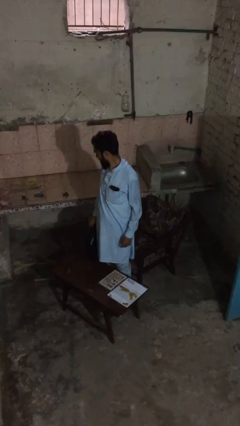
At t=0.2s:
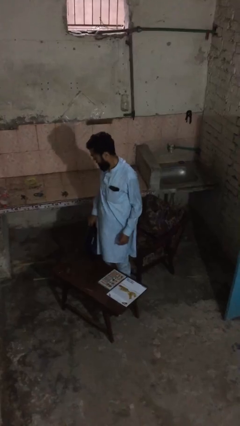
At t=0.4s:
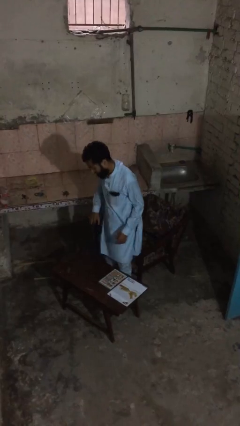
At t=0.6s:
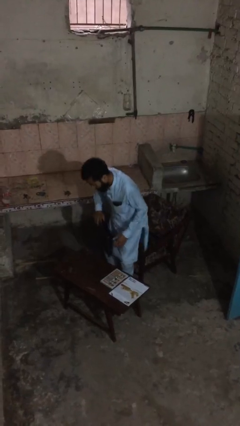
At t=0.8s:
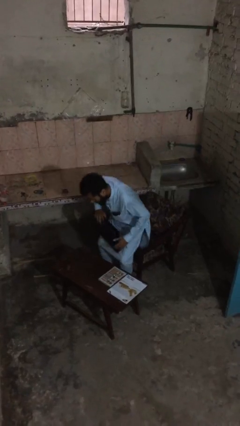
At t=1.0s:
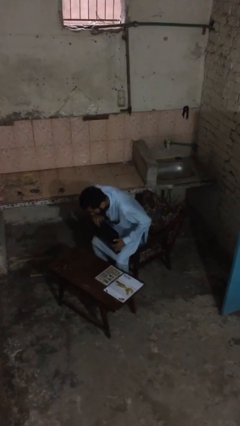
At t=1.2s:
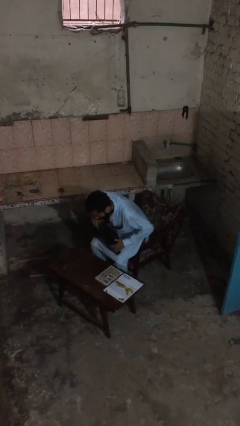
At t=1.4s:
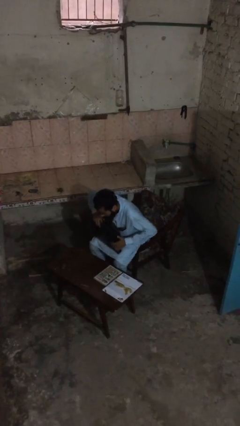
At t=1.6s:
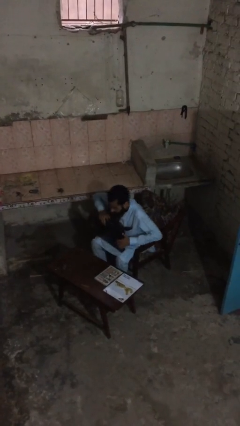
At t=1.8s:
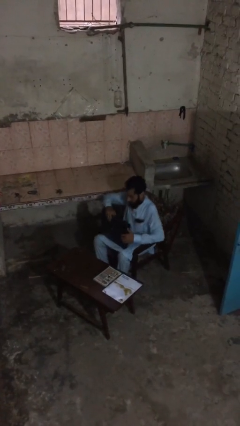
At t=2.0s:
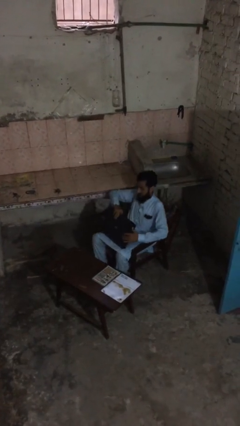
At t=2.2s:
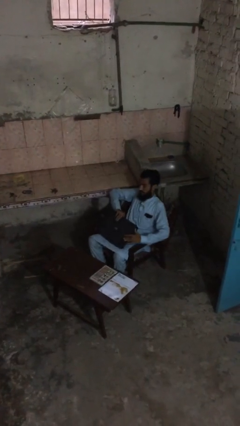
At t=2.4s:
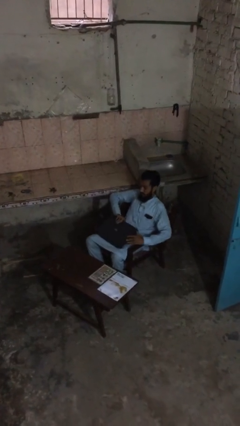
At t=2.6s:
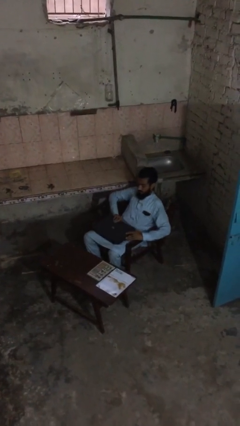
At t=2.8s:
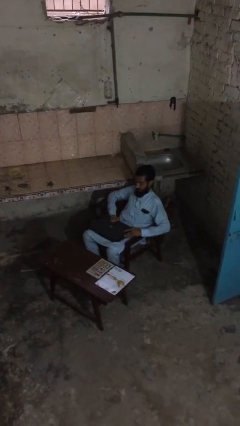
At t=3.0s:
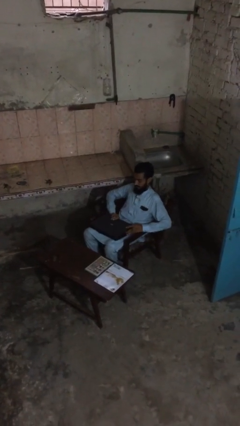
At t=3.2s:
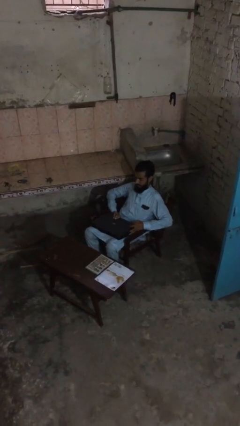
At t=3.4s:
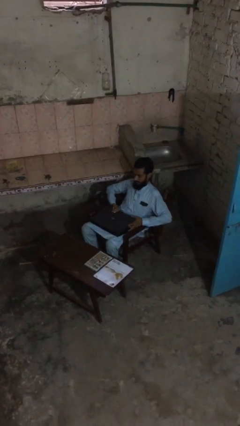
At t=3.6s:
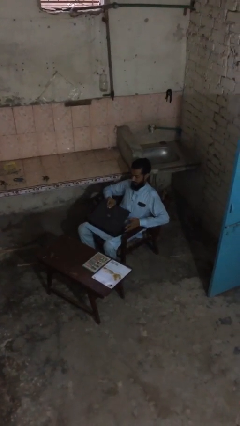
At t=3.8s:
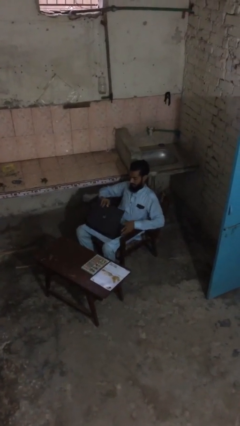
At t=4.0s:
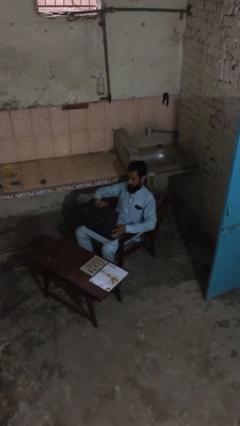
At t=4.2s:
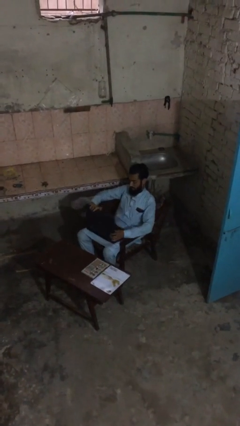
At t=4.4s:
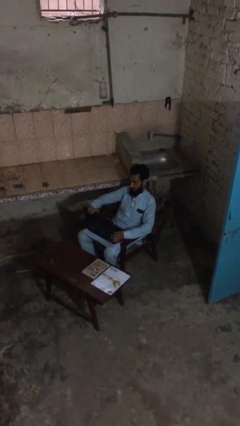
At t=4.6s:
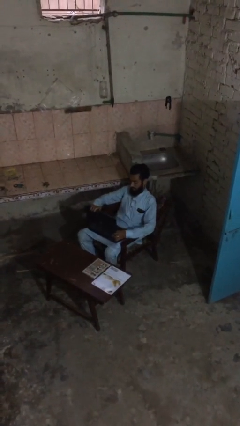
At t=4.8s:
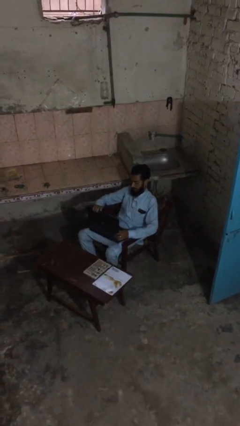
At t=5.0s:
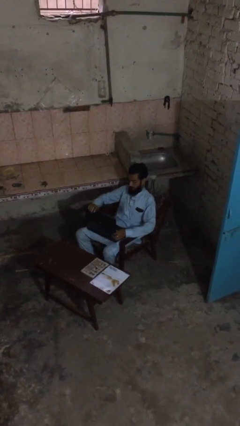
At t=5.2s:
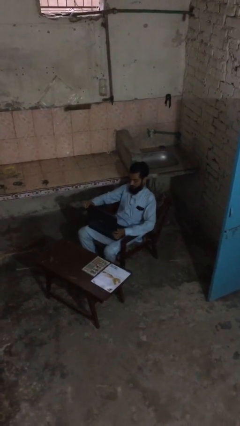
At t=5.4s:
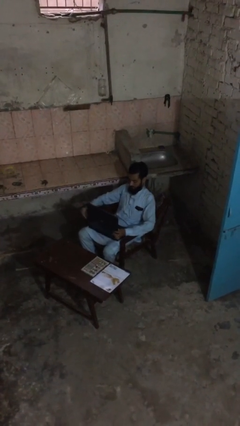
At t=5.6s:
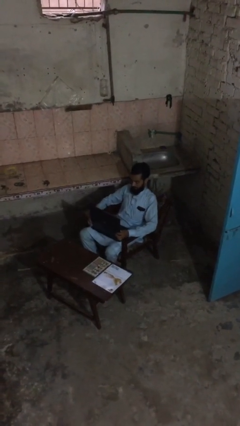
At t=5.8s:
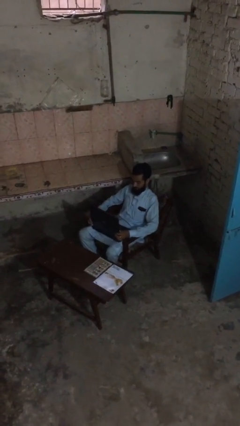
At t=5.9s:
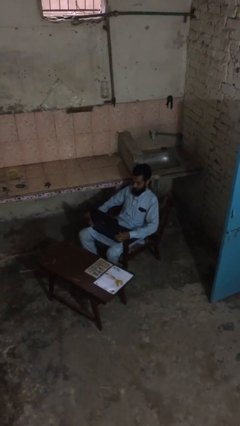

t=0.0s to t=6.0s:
person sits down

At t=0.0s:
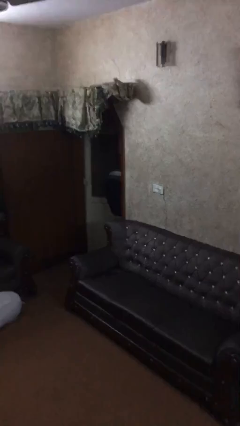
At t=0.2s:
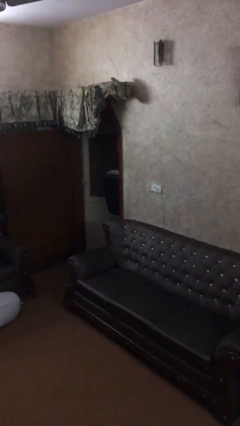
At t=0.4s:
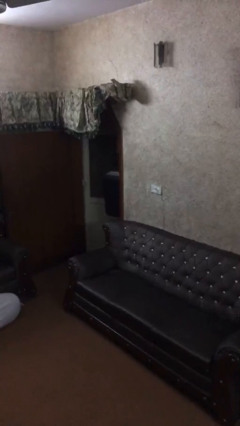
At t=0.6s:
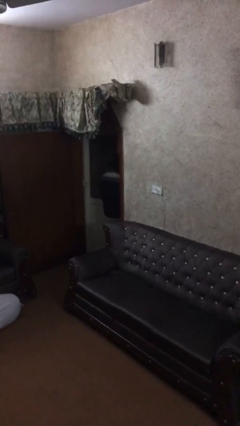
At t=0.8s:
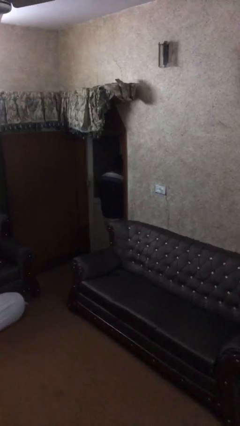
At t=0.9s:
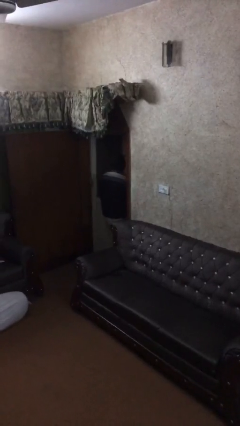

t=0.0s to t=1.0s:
person opens facility door

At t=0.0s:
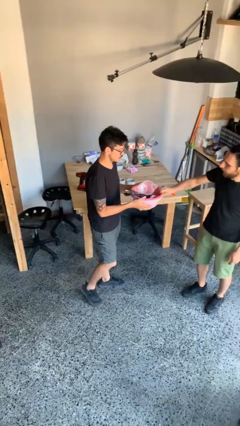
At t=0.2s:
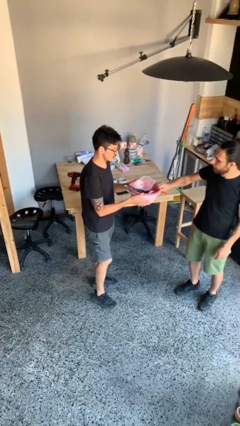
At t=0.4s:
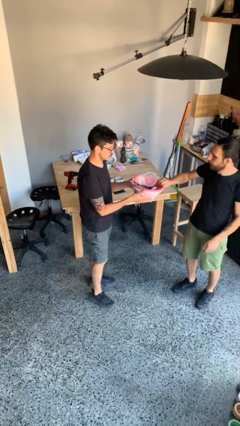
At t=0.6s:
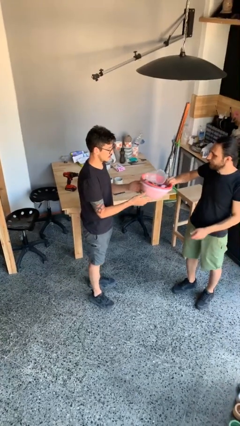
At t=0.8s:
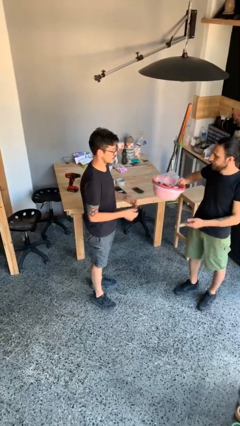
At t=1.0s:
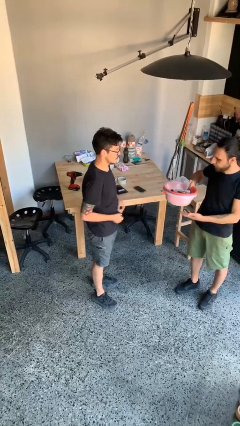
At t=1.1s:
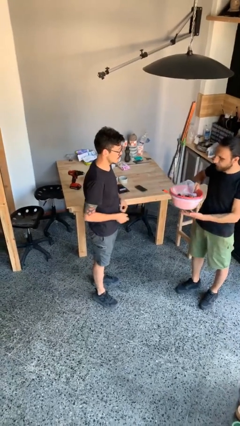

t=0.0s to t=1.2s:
person transfers object to person

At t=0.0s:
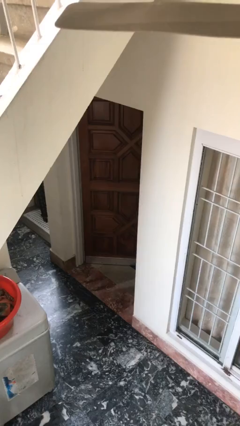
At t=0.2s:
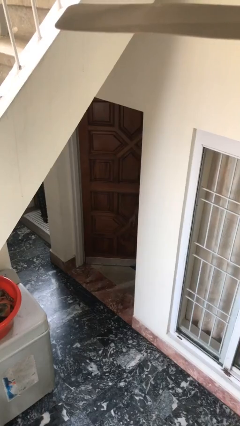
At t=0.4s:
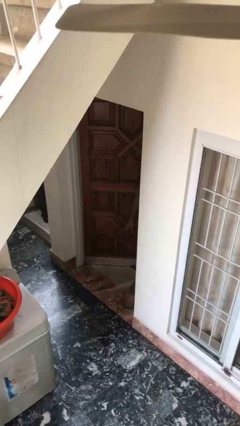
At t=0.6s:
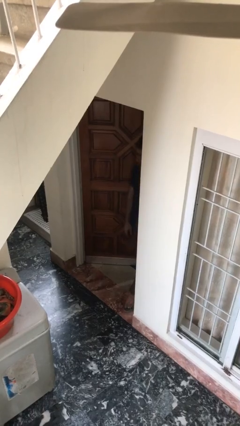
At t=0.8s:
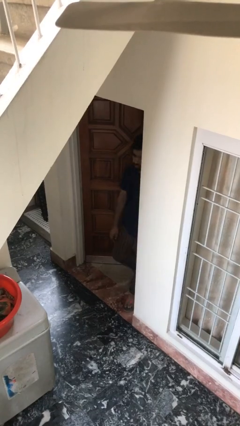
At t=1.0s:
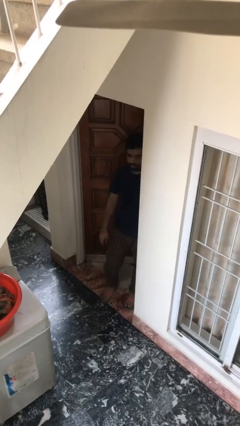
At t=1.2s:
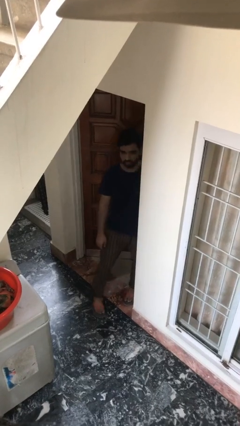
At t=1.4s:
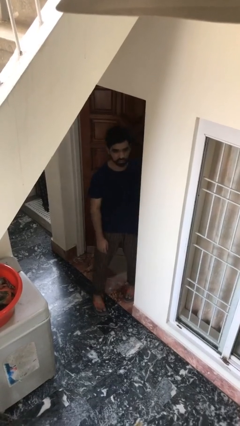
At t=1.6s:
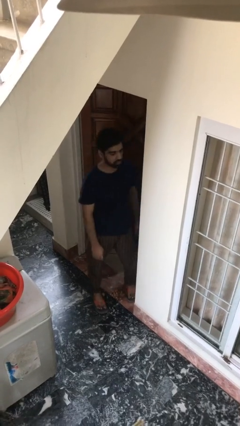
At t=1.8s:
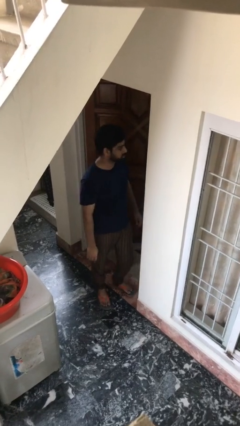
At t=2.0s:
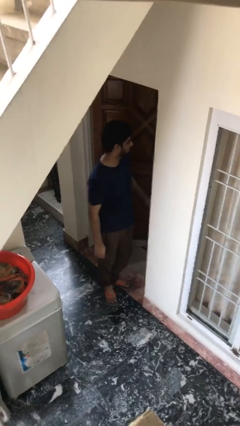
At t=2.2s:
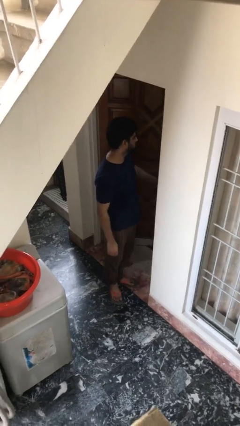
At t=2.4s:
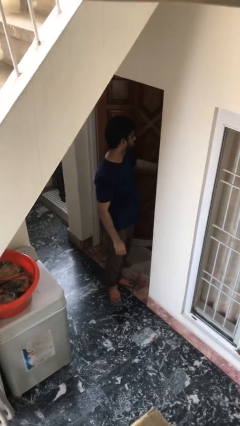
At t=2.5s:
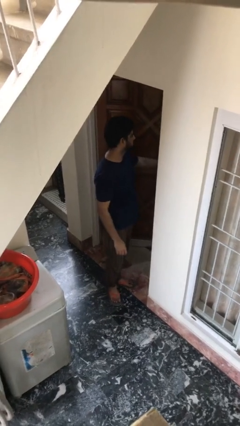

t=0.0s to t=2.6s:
person enters scene through structure

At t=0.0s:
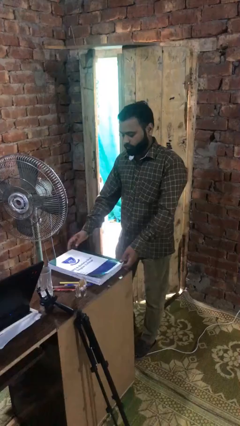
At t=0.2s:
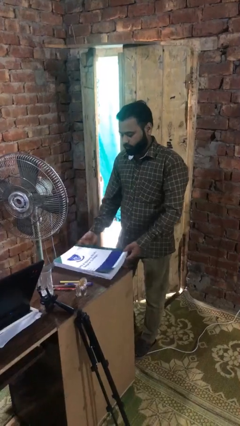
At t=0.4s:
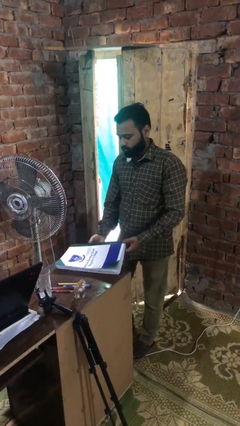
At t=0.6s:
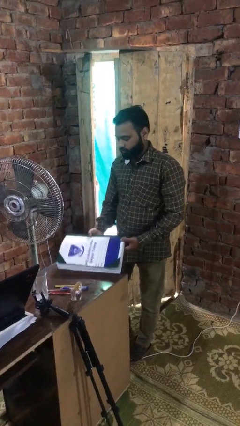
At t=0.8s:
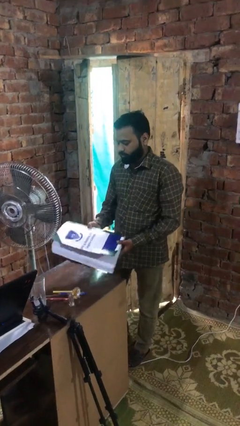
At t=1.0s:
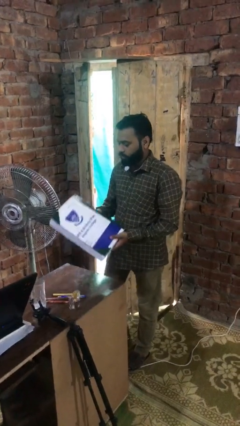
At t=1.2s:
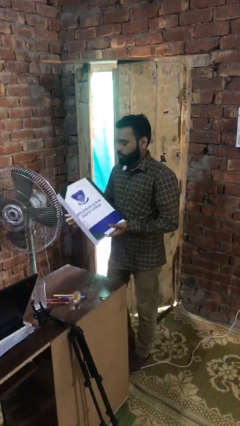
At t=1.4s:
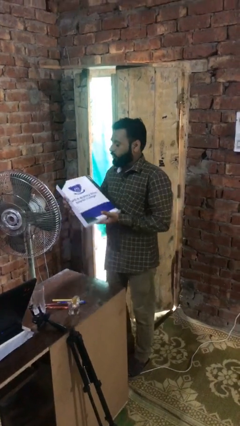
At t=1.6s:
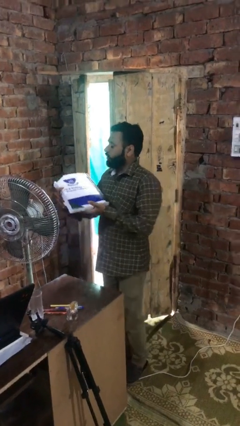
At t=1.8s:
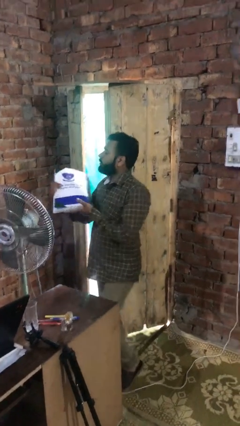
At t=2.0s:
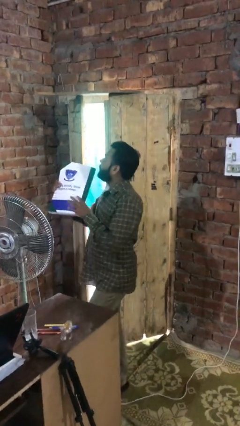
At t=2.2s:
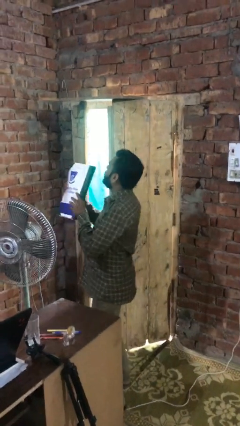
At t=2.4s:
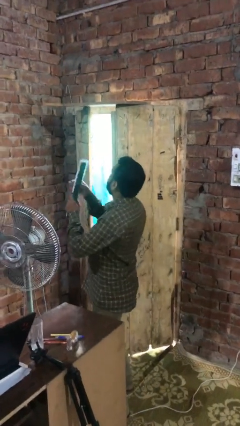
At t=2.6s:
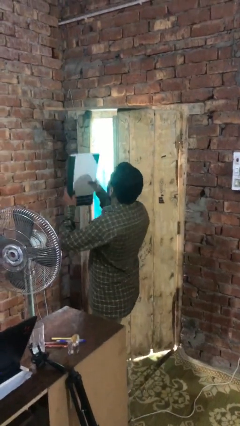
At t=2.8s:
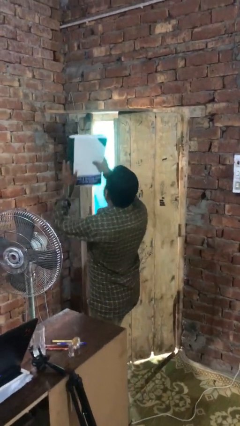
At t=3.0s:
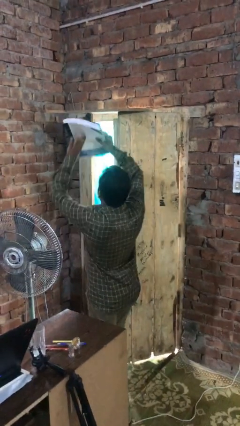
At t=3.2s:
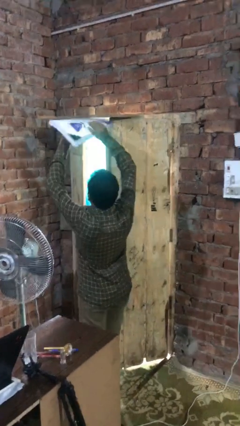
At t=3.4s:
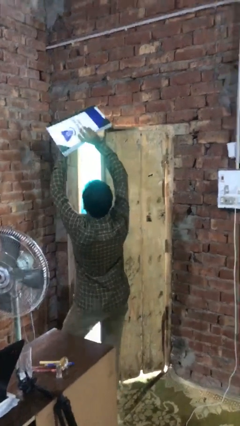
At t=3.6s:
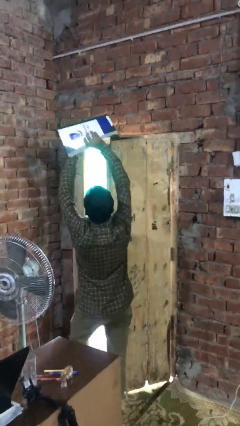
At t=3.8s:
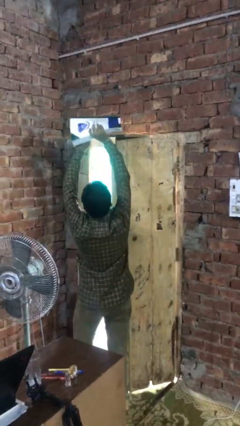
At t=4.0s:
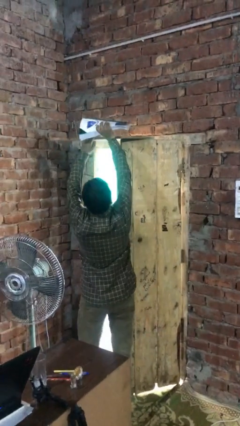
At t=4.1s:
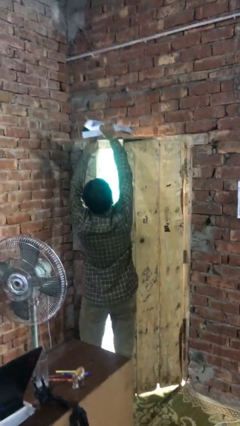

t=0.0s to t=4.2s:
person picks up object from table

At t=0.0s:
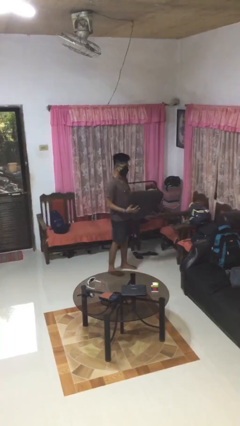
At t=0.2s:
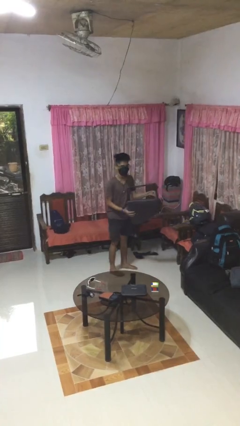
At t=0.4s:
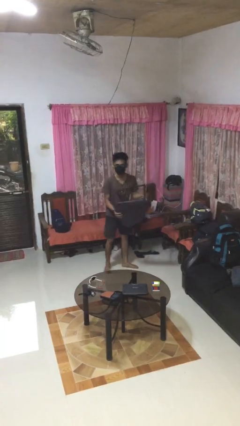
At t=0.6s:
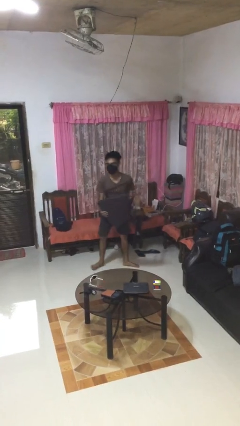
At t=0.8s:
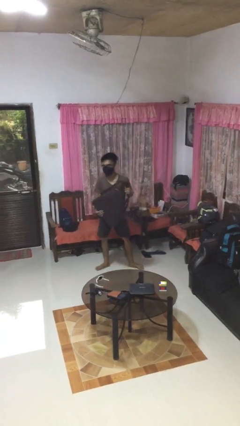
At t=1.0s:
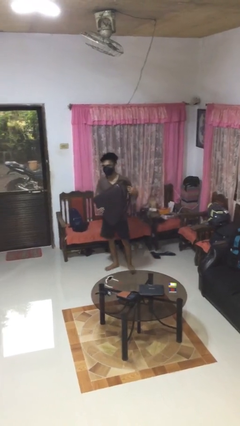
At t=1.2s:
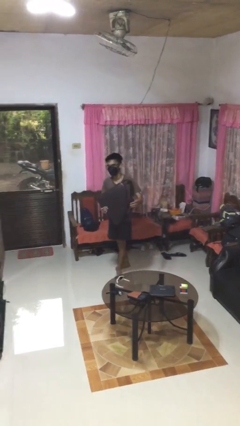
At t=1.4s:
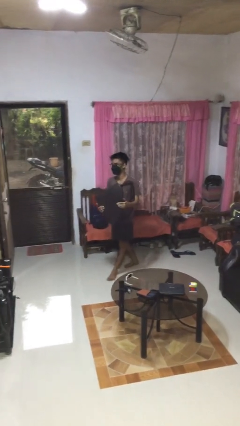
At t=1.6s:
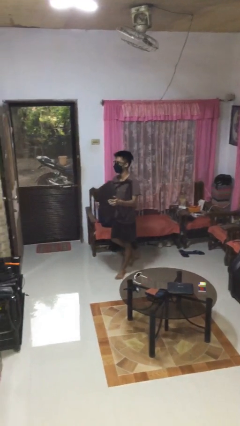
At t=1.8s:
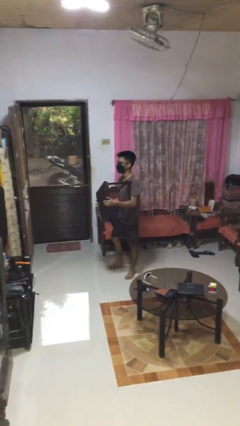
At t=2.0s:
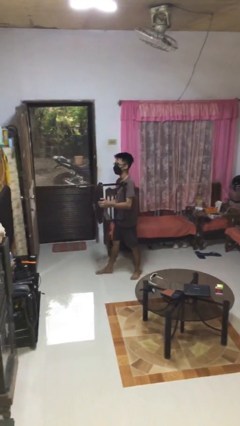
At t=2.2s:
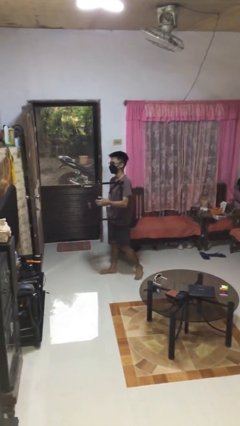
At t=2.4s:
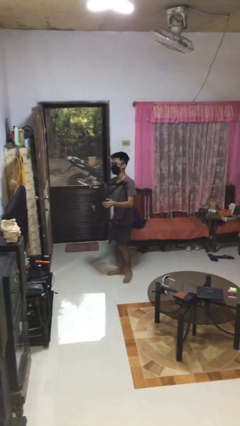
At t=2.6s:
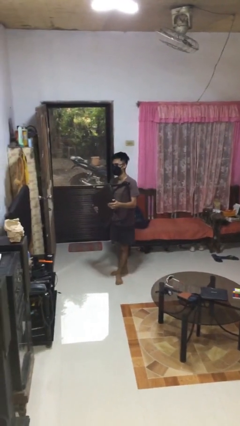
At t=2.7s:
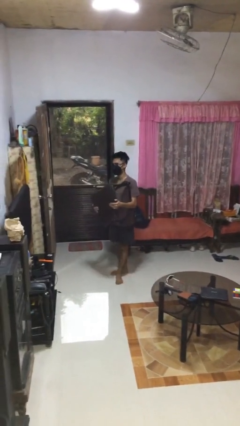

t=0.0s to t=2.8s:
person carries furniture
